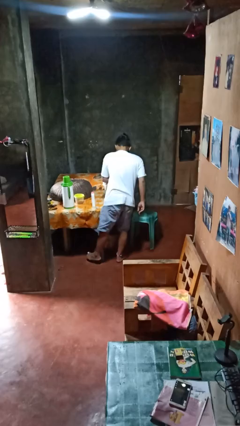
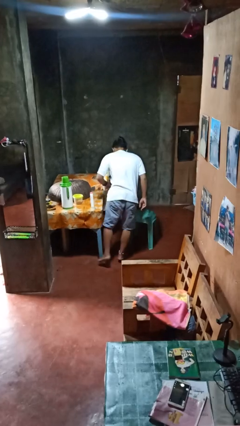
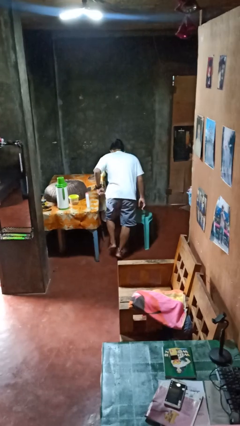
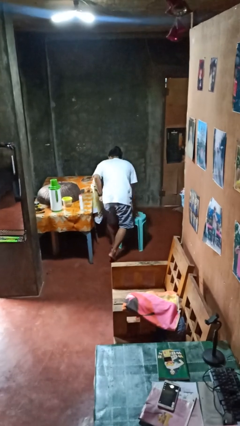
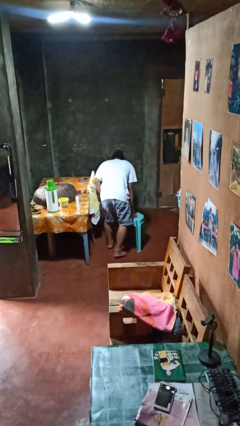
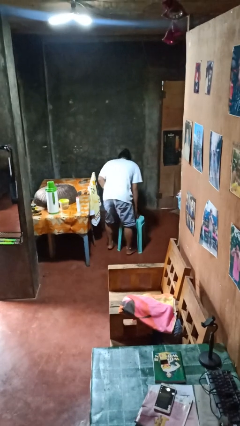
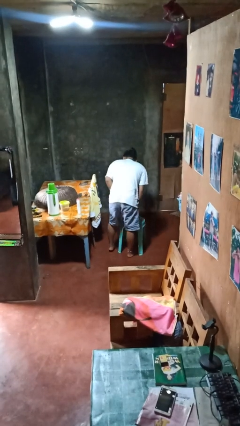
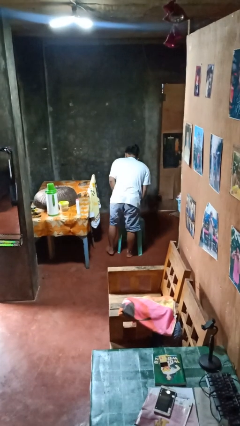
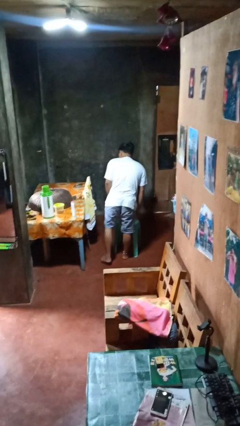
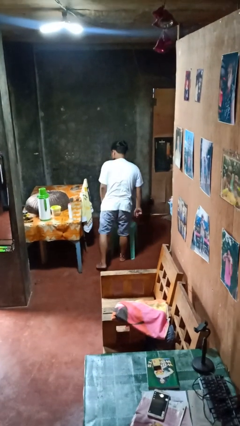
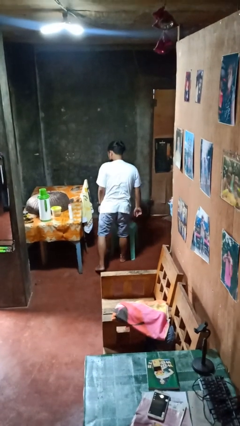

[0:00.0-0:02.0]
person bumps into table

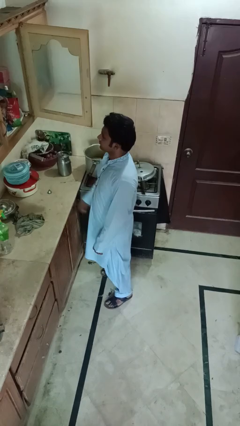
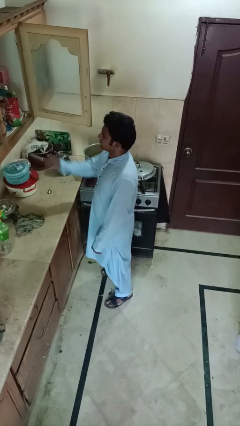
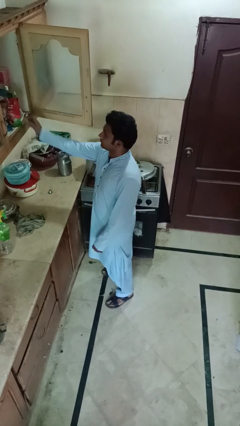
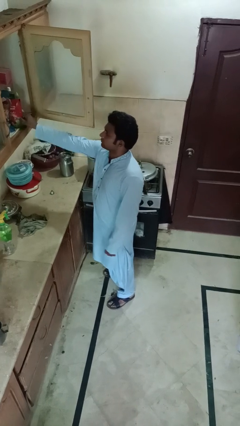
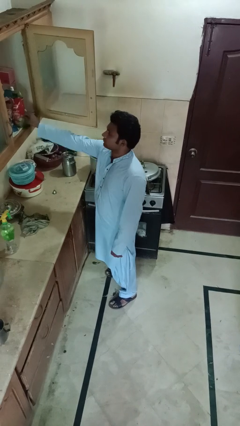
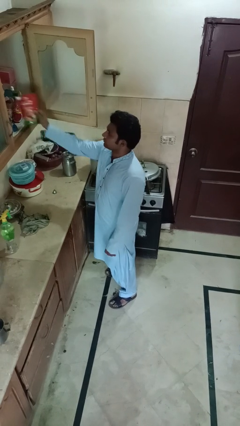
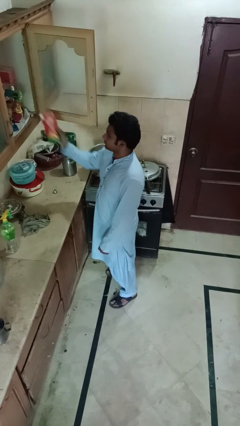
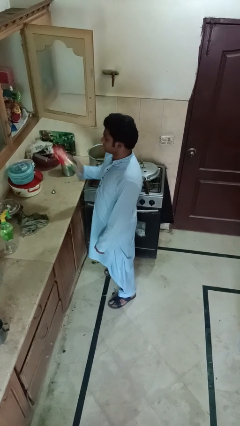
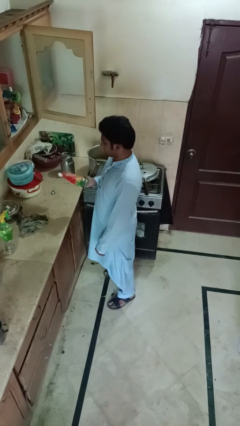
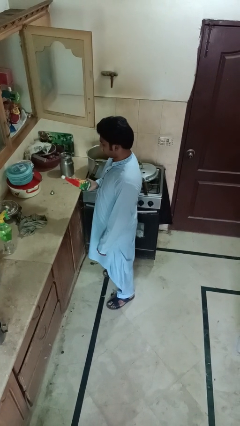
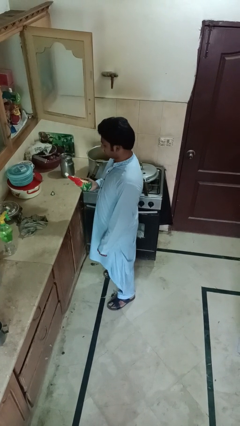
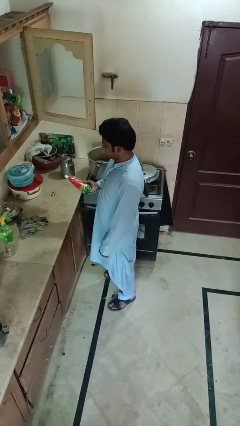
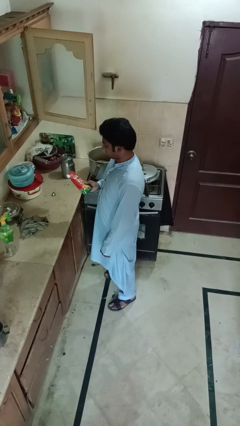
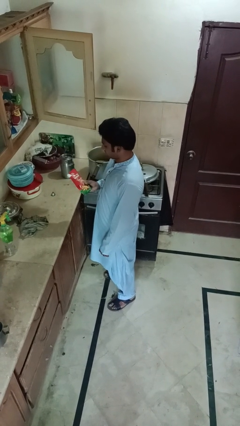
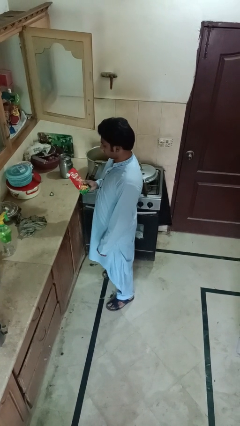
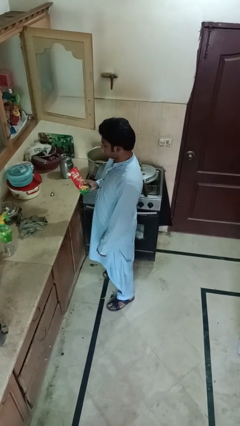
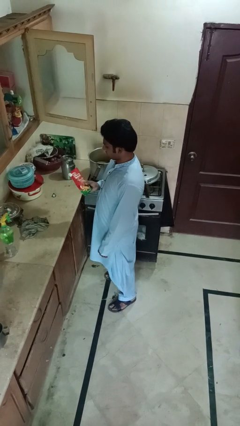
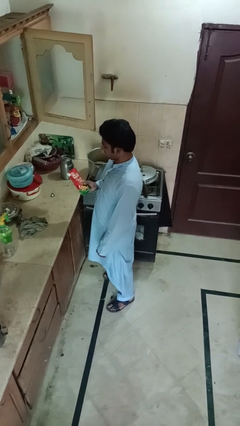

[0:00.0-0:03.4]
person picks up object from cabinet

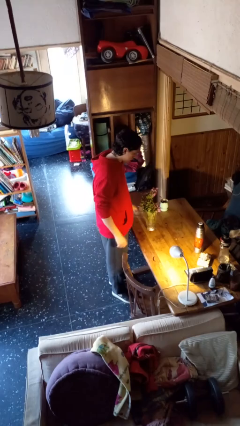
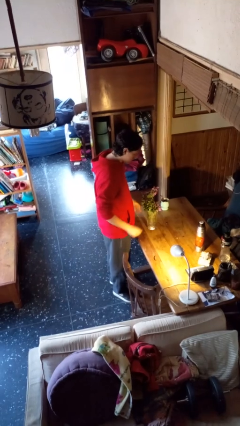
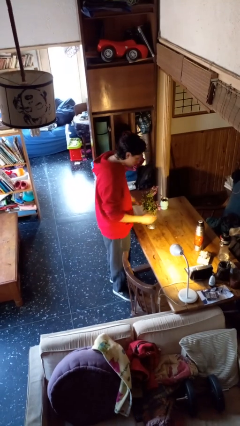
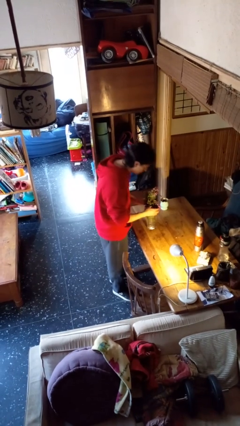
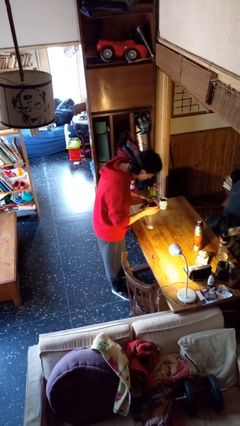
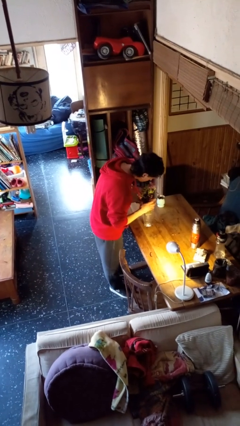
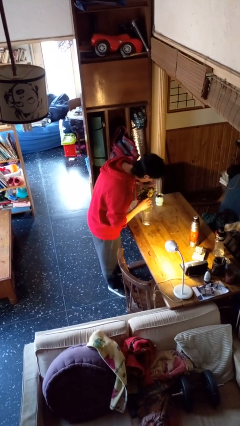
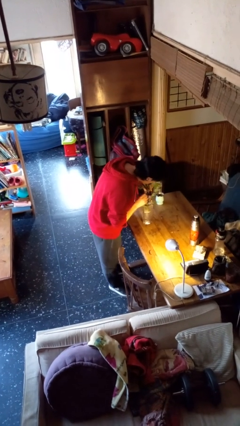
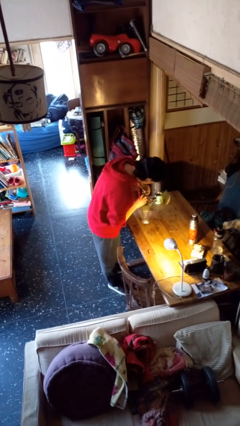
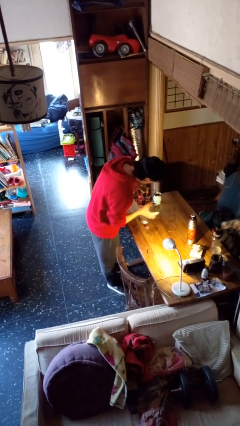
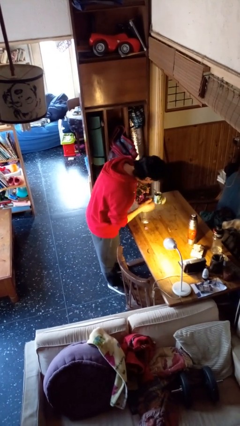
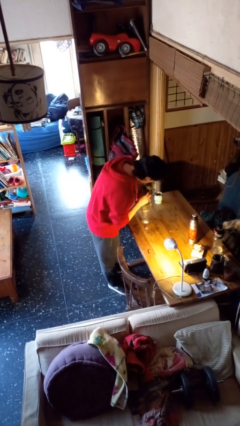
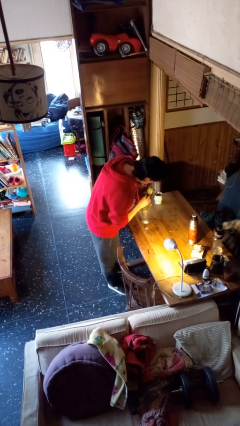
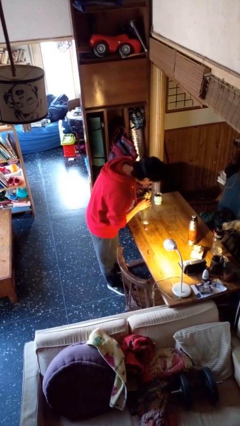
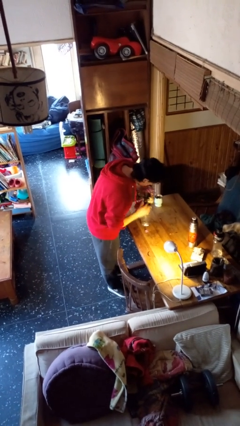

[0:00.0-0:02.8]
person arranges flowers in vase

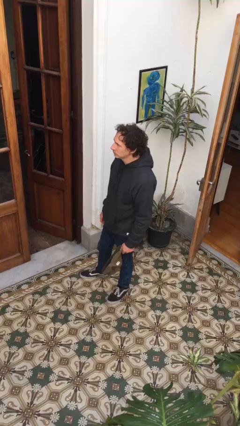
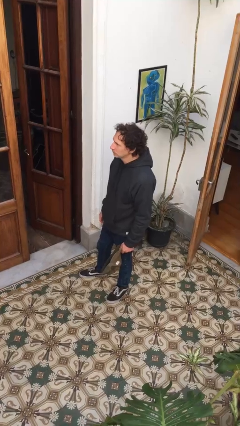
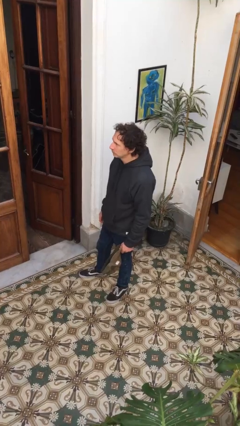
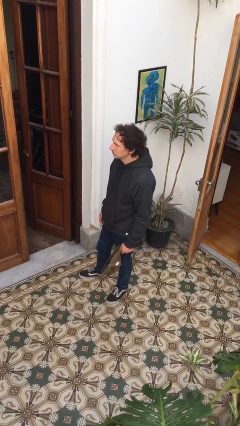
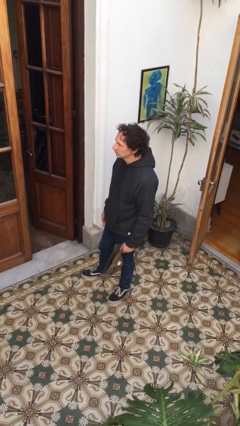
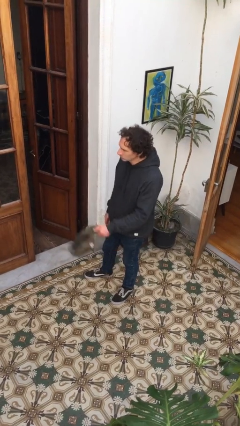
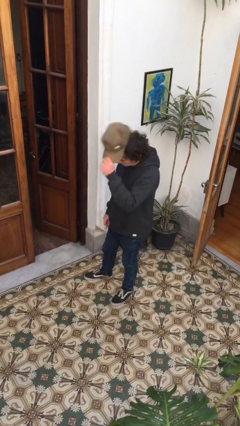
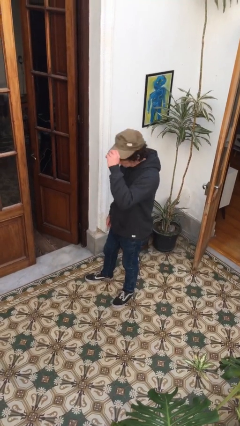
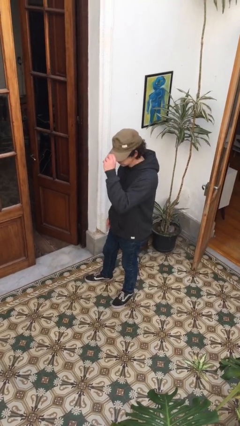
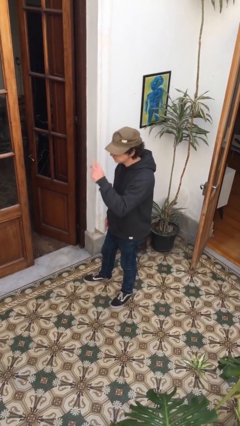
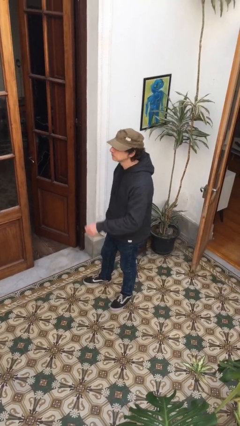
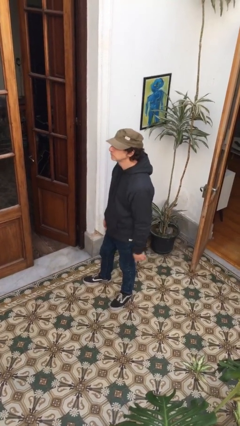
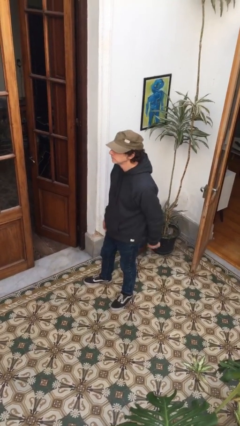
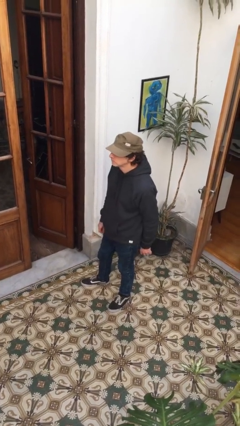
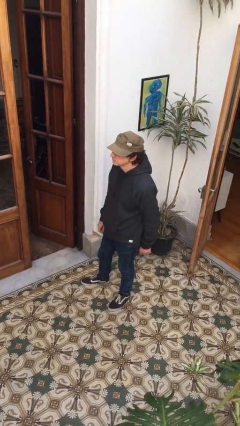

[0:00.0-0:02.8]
person puts on hat

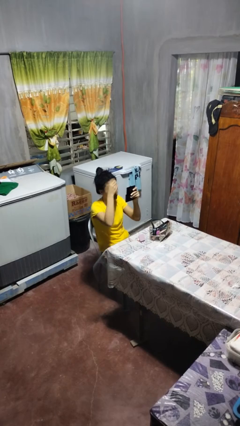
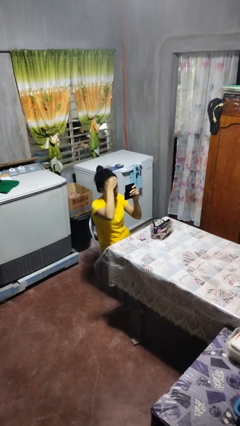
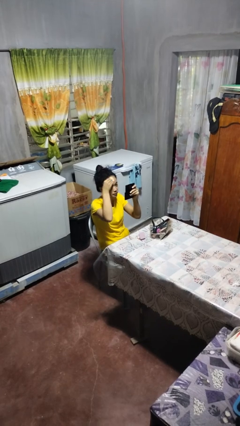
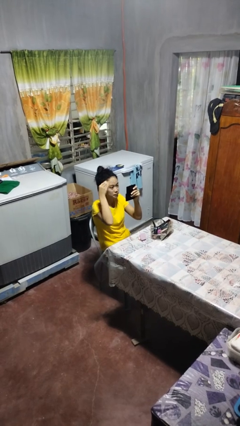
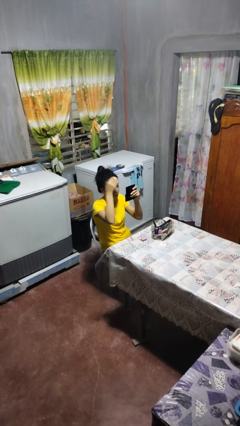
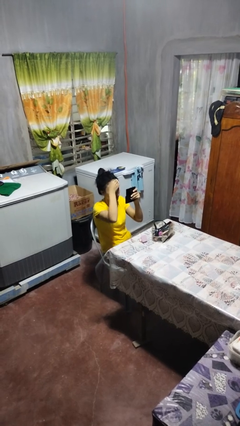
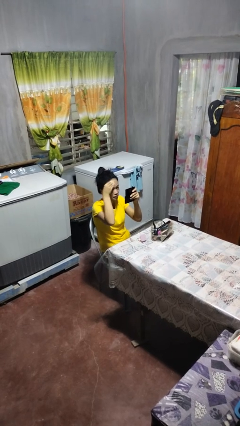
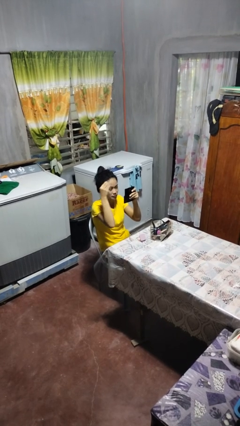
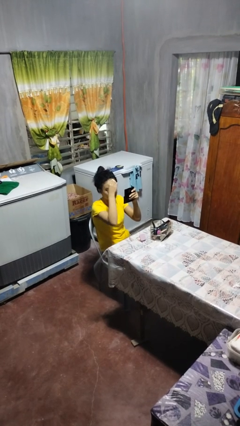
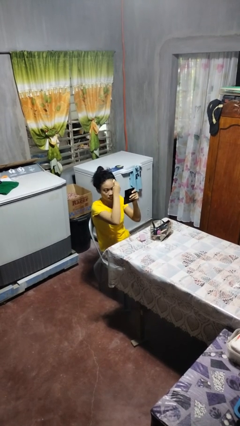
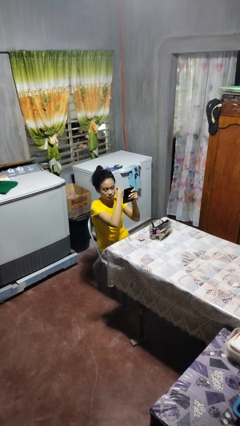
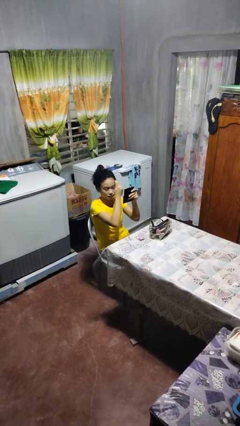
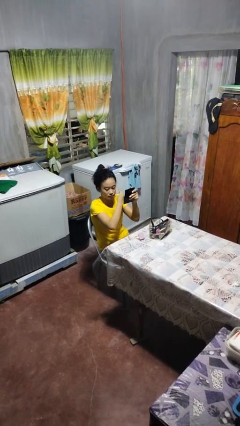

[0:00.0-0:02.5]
person applies foundation makeup

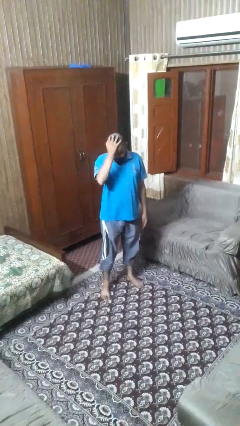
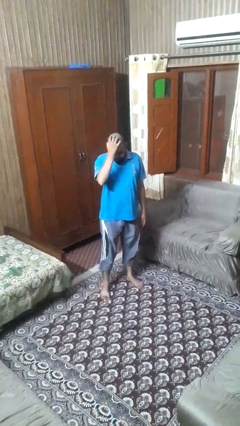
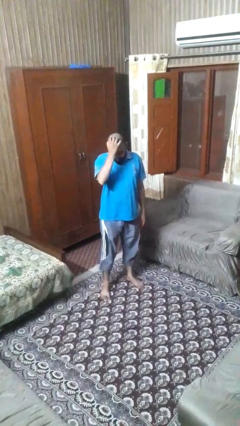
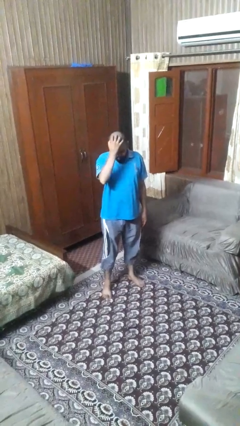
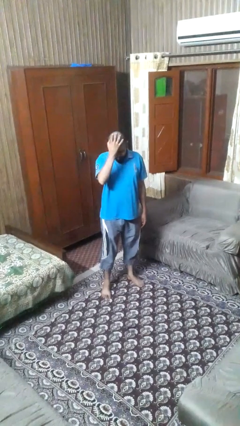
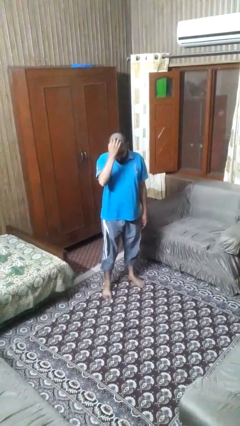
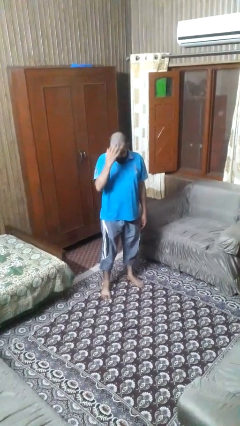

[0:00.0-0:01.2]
person scratches face

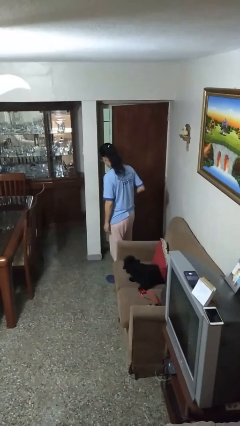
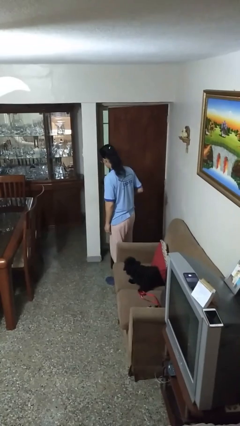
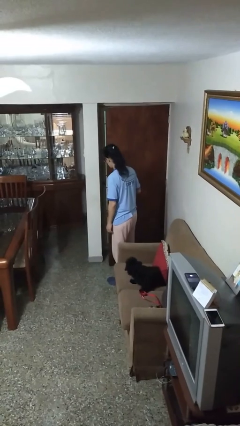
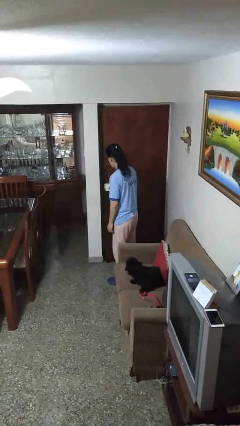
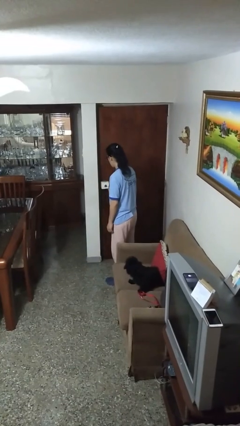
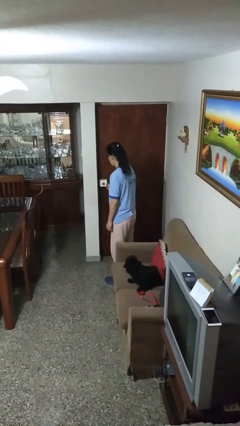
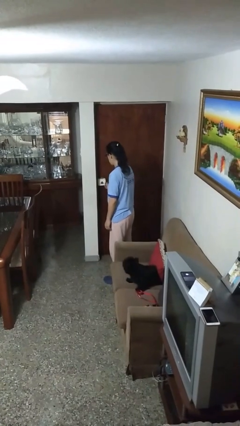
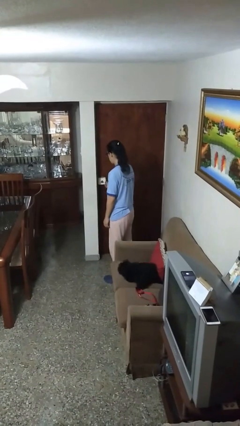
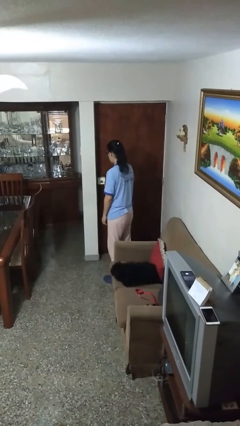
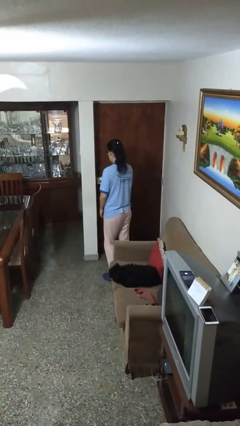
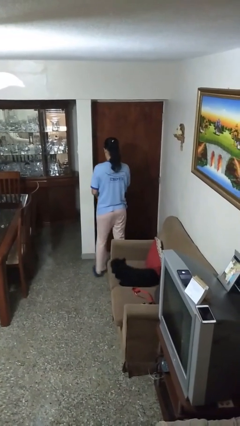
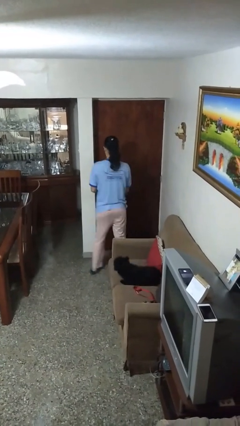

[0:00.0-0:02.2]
person closes facility door
